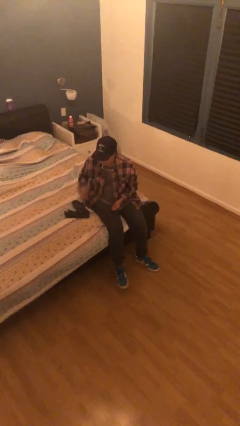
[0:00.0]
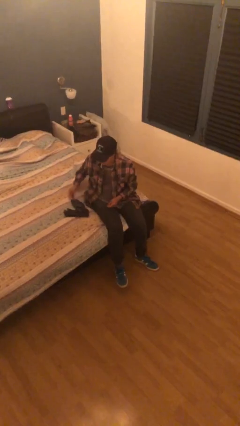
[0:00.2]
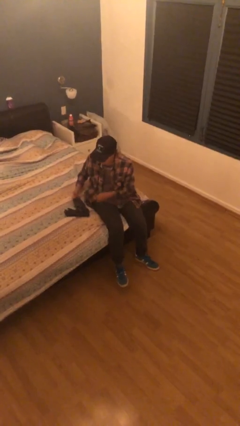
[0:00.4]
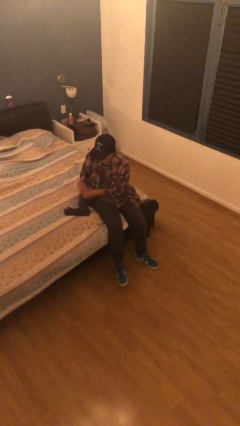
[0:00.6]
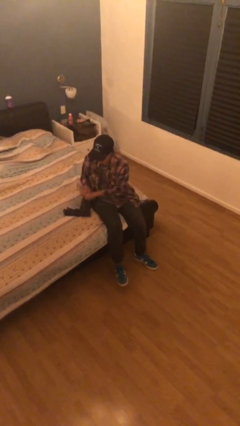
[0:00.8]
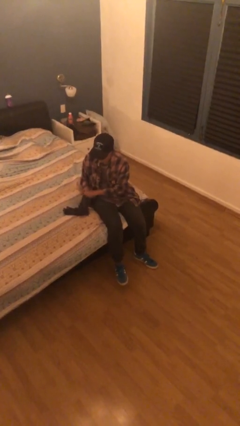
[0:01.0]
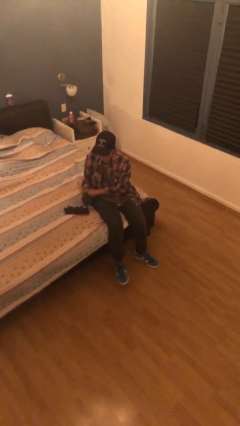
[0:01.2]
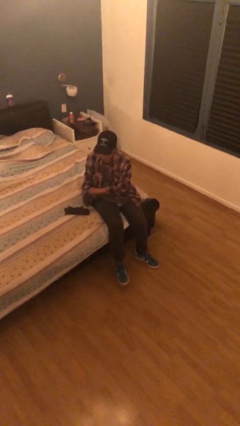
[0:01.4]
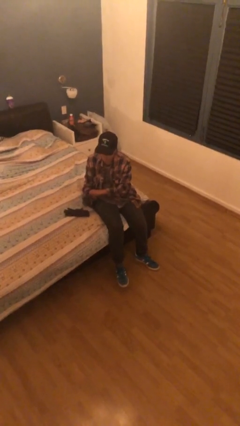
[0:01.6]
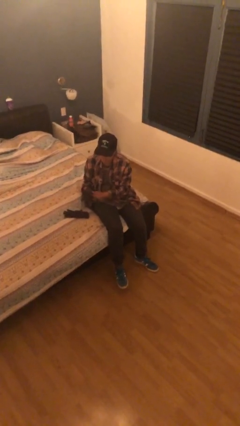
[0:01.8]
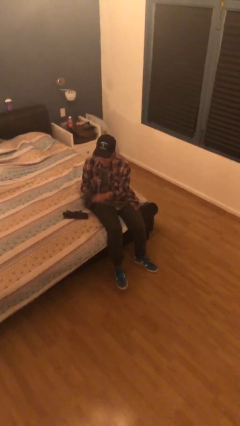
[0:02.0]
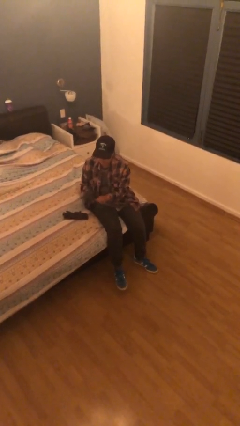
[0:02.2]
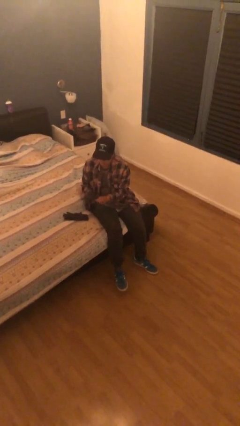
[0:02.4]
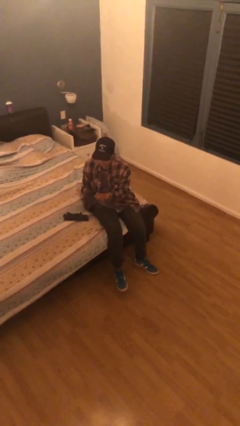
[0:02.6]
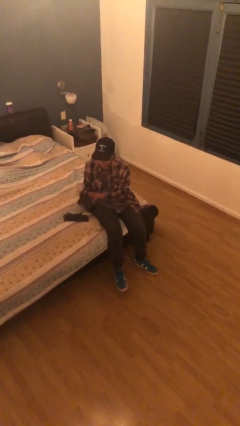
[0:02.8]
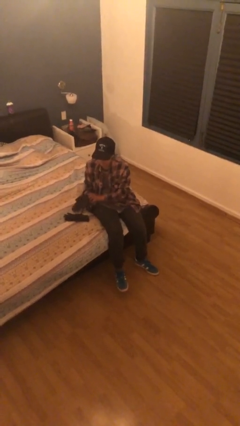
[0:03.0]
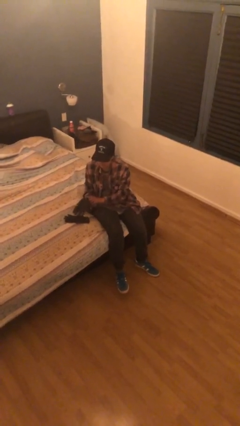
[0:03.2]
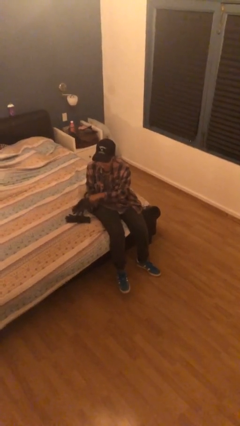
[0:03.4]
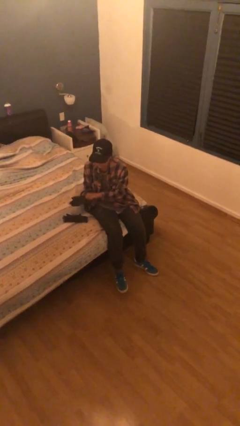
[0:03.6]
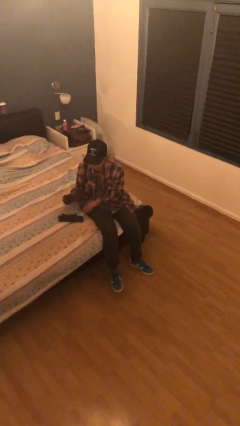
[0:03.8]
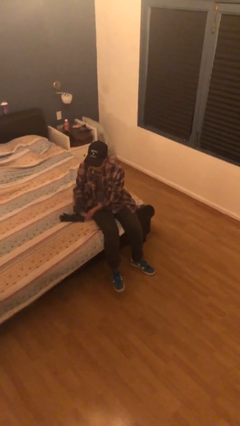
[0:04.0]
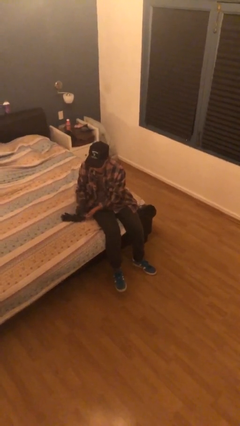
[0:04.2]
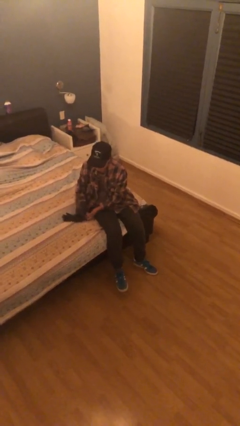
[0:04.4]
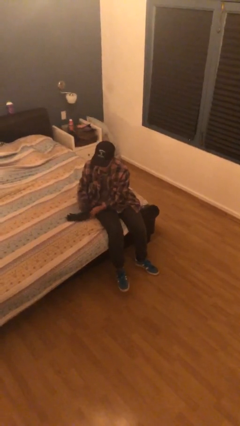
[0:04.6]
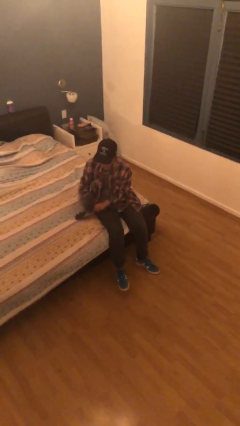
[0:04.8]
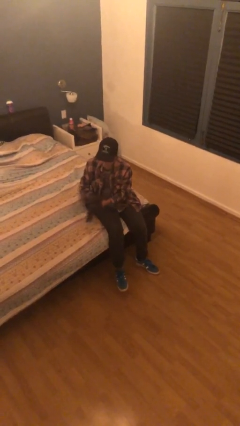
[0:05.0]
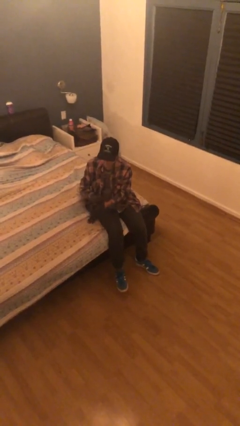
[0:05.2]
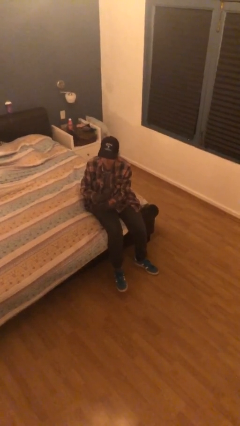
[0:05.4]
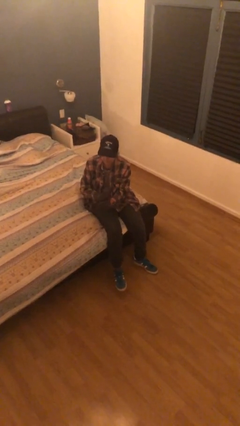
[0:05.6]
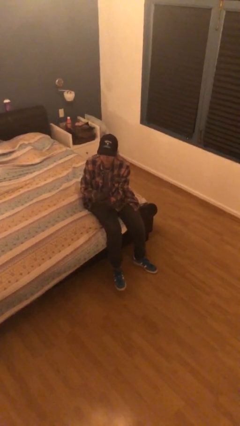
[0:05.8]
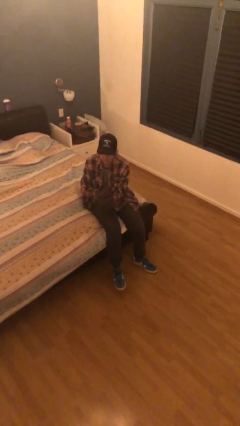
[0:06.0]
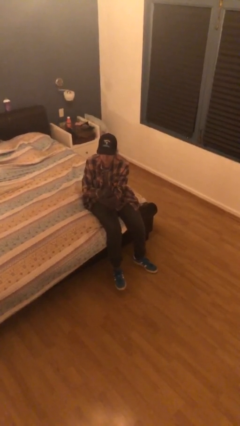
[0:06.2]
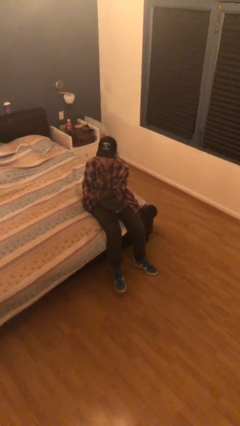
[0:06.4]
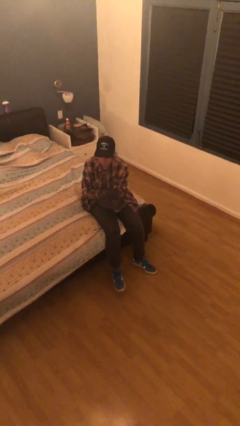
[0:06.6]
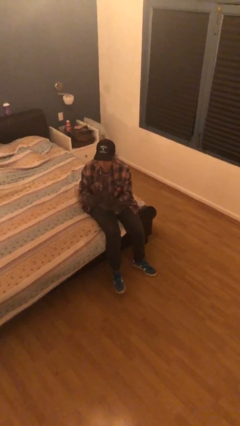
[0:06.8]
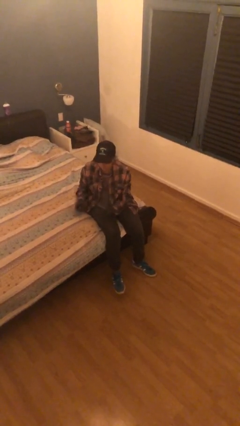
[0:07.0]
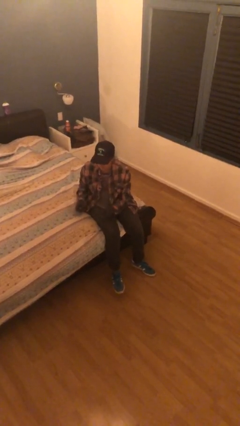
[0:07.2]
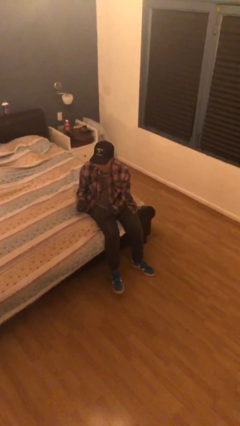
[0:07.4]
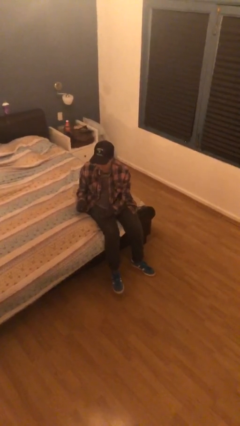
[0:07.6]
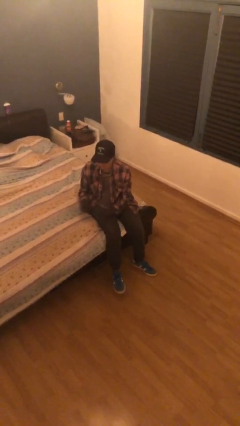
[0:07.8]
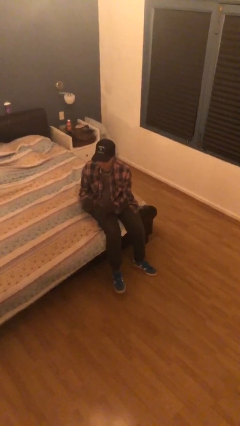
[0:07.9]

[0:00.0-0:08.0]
person puts on gloves

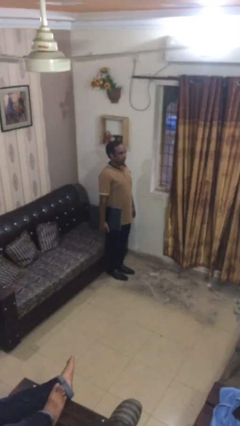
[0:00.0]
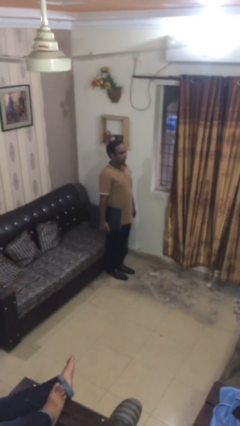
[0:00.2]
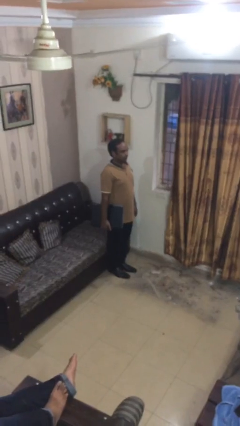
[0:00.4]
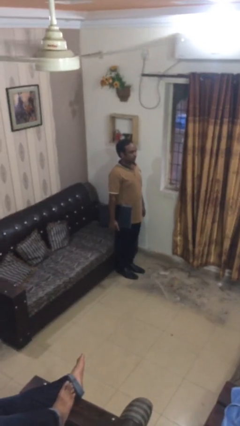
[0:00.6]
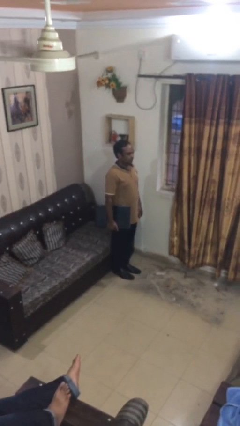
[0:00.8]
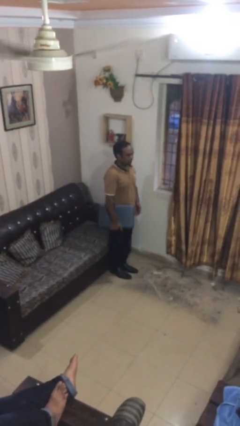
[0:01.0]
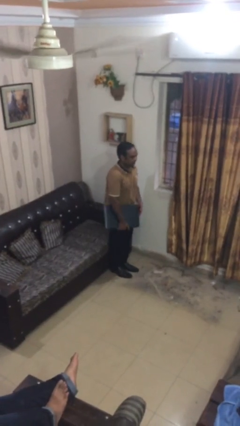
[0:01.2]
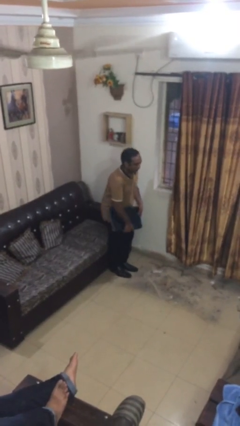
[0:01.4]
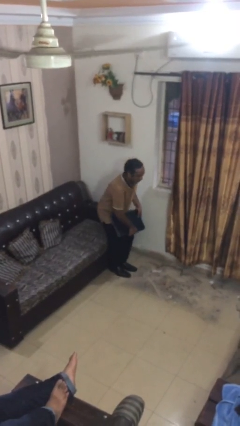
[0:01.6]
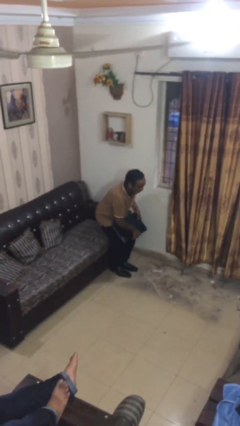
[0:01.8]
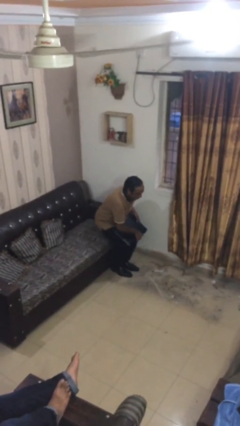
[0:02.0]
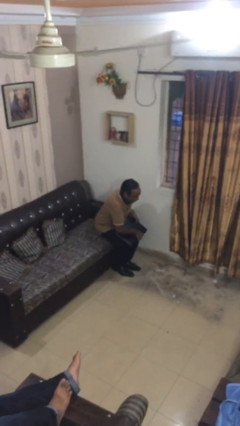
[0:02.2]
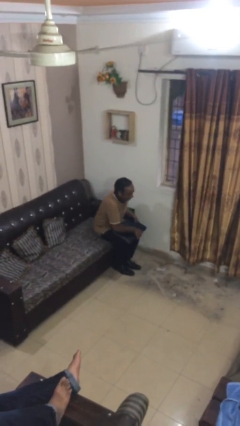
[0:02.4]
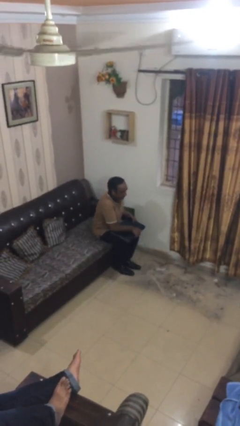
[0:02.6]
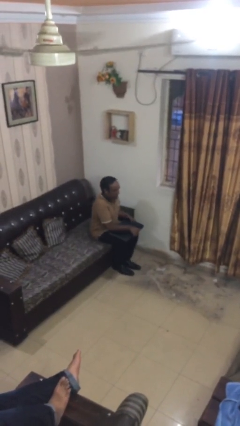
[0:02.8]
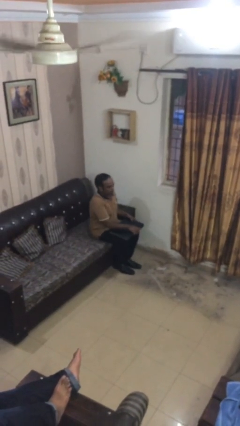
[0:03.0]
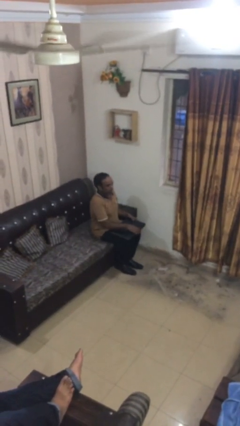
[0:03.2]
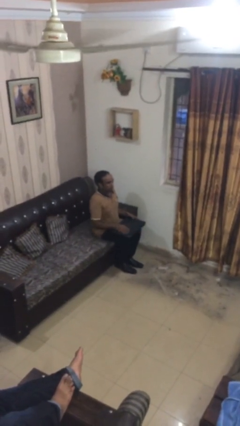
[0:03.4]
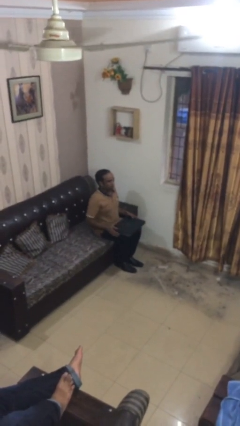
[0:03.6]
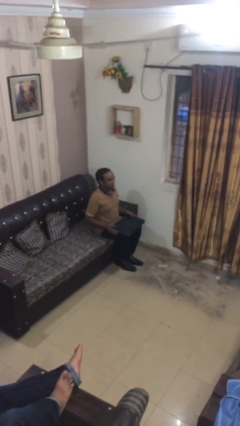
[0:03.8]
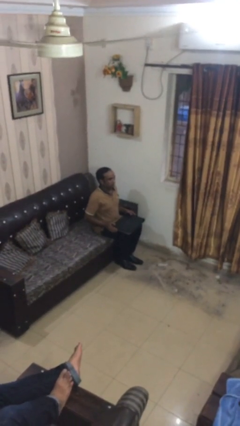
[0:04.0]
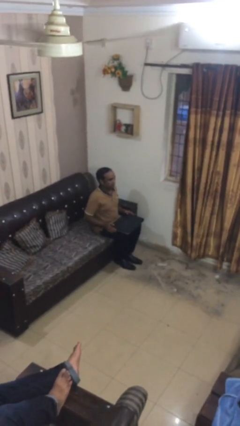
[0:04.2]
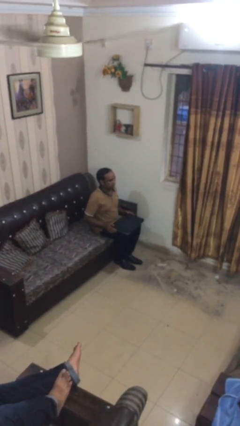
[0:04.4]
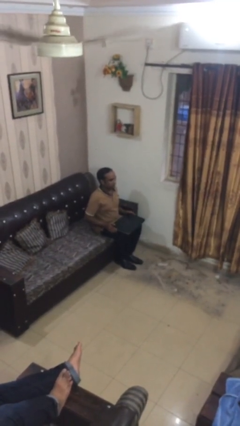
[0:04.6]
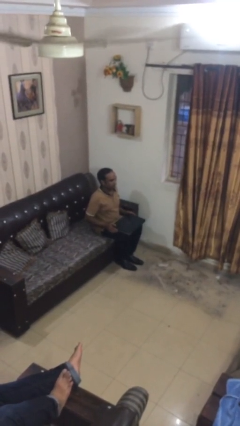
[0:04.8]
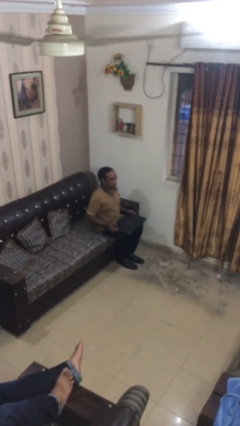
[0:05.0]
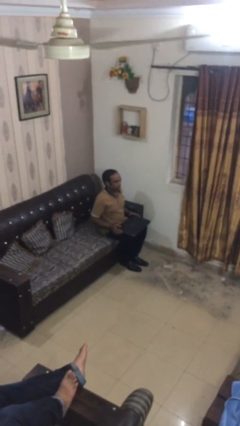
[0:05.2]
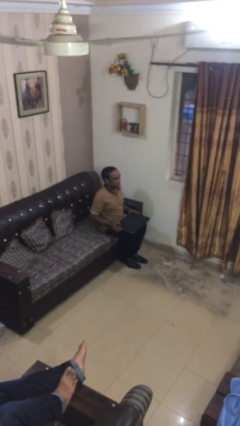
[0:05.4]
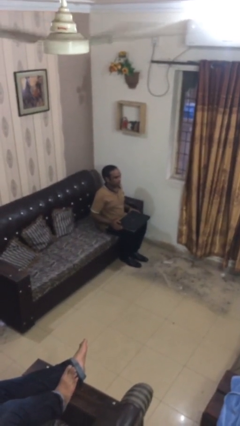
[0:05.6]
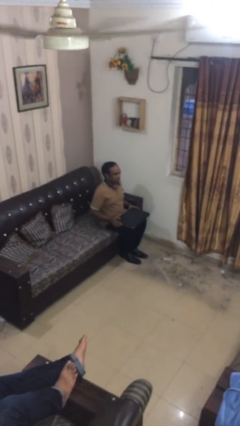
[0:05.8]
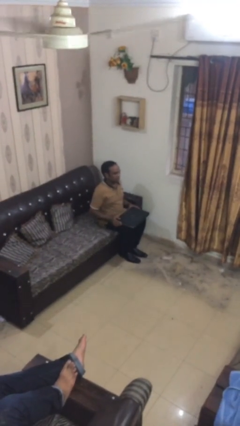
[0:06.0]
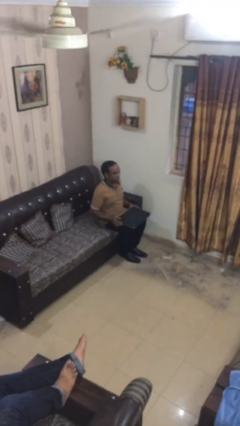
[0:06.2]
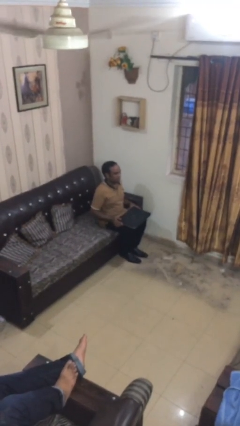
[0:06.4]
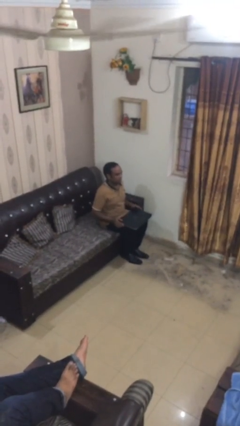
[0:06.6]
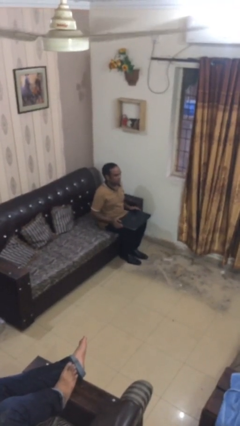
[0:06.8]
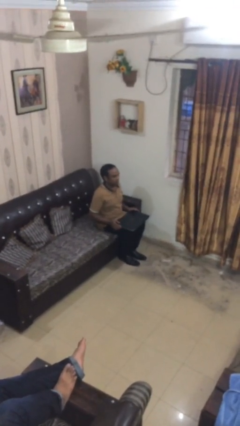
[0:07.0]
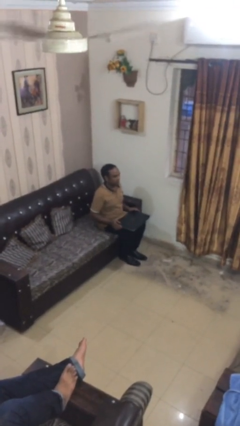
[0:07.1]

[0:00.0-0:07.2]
person sits down

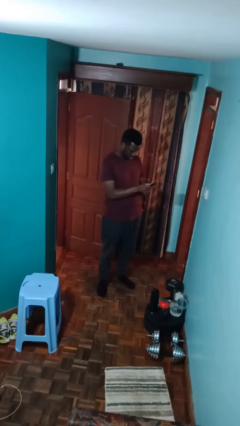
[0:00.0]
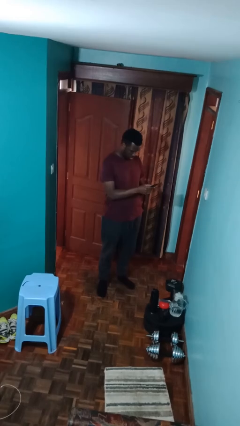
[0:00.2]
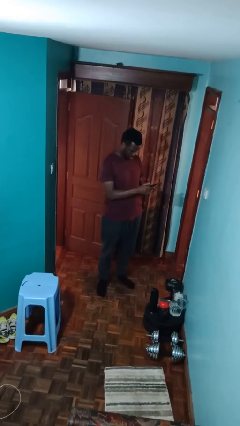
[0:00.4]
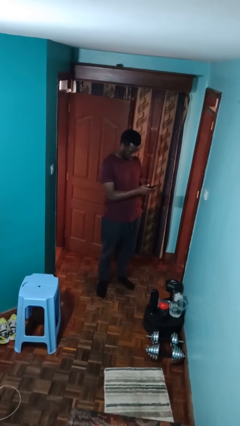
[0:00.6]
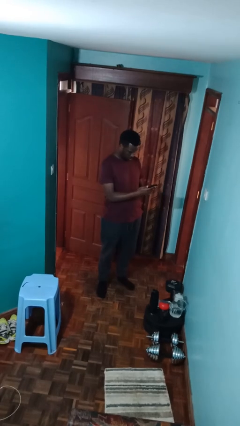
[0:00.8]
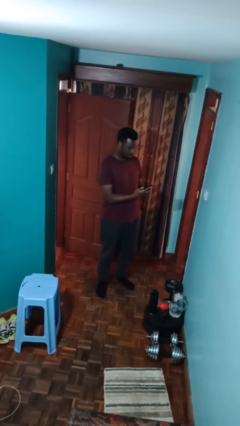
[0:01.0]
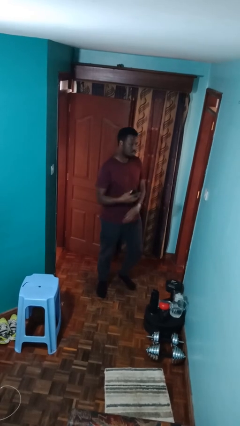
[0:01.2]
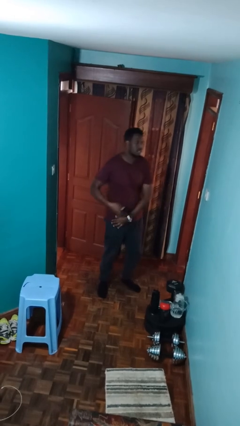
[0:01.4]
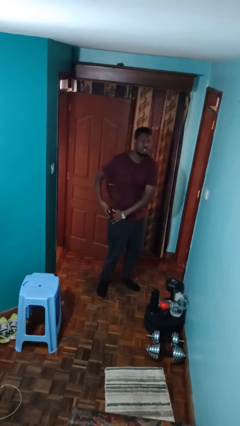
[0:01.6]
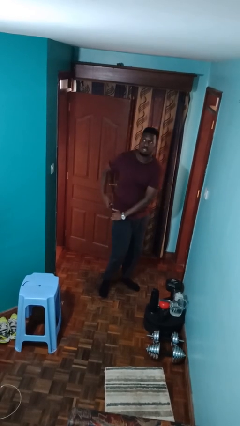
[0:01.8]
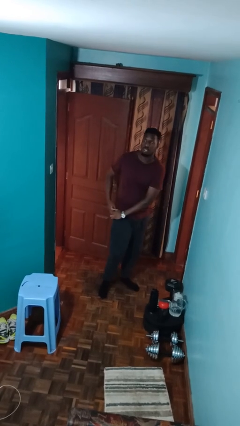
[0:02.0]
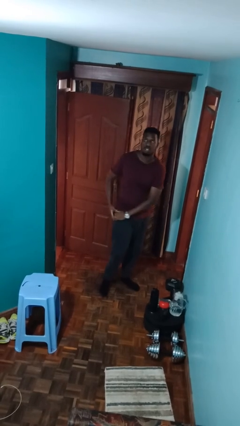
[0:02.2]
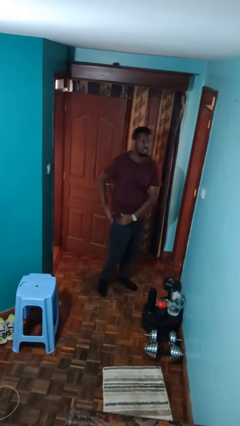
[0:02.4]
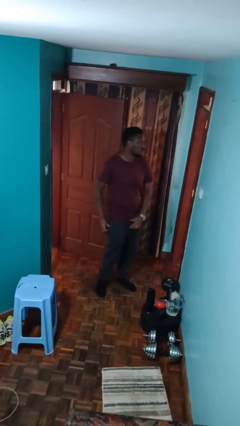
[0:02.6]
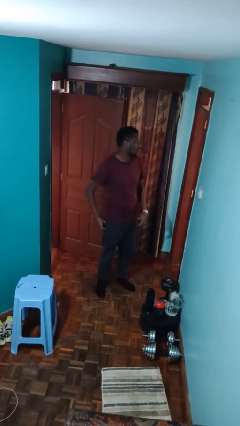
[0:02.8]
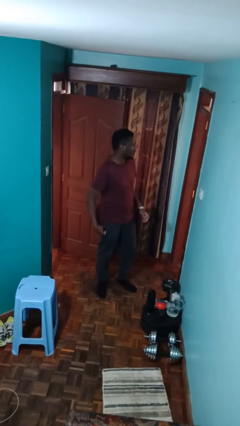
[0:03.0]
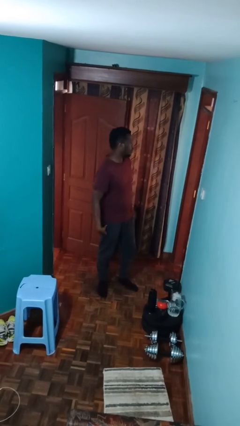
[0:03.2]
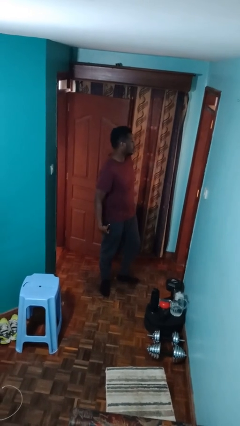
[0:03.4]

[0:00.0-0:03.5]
person puts phone into pocket
